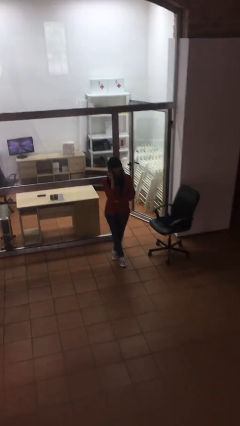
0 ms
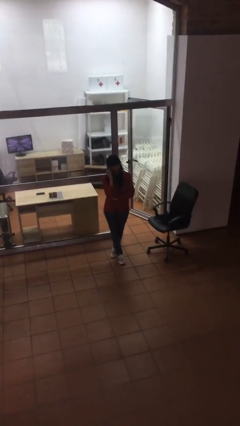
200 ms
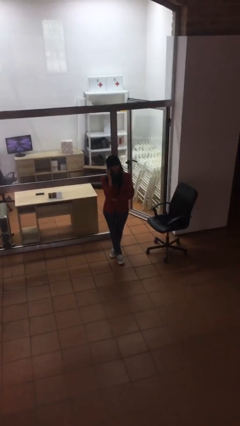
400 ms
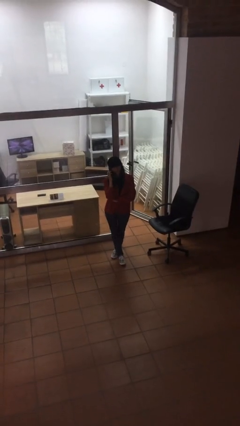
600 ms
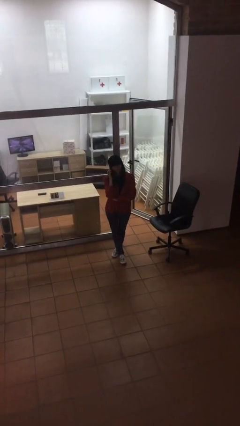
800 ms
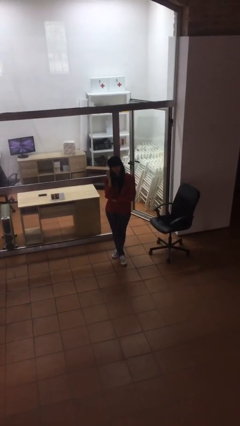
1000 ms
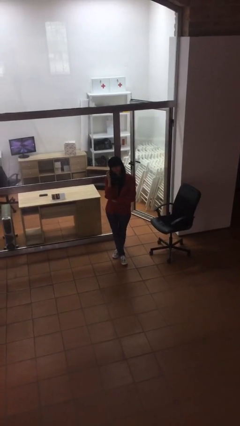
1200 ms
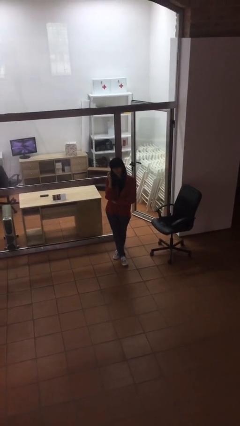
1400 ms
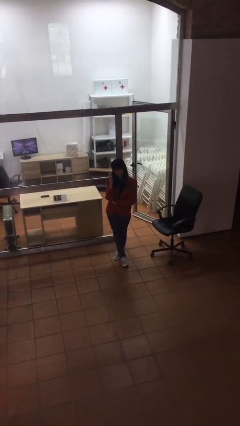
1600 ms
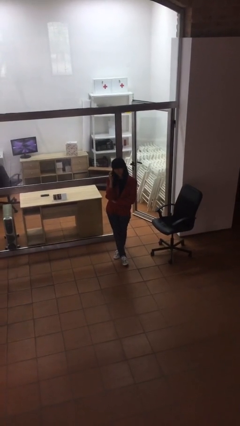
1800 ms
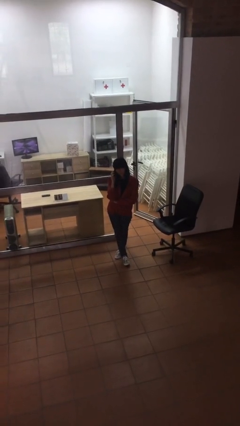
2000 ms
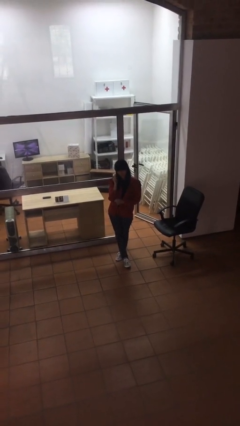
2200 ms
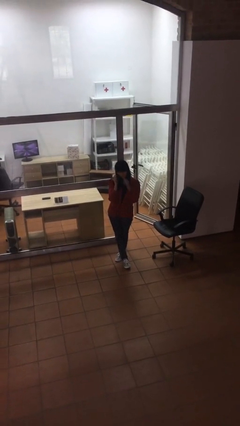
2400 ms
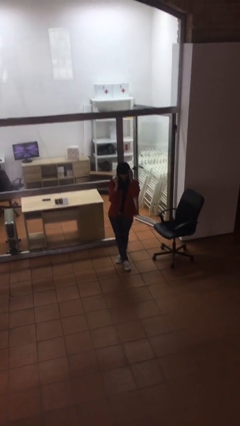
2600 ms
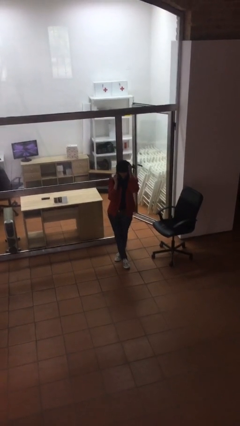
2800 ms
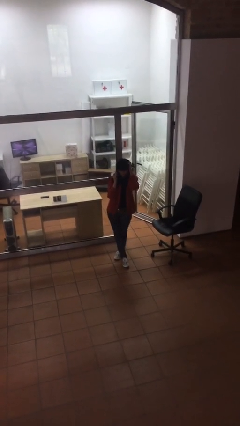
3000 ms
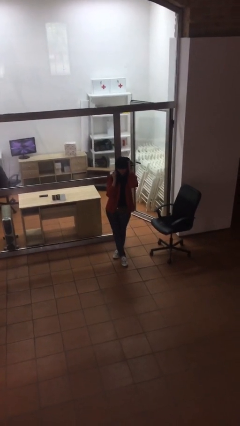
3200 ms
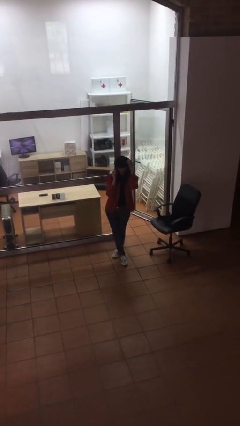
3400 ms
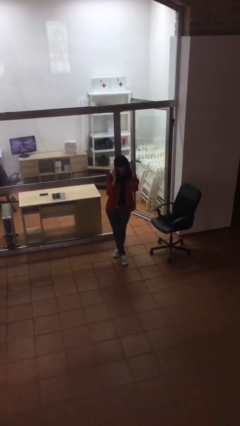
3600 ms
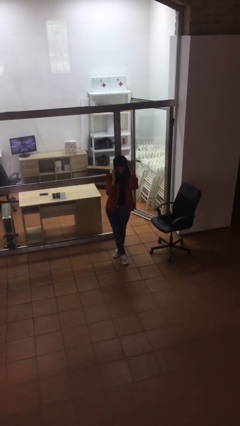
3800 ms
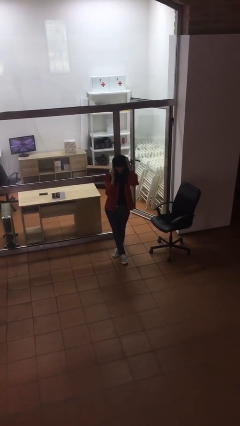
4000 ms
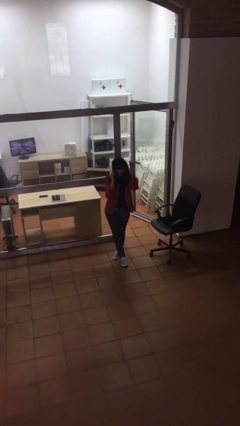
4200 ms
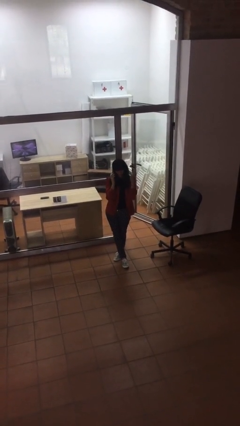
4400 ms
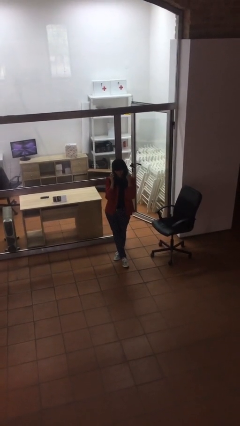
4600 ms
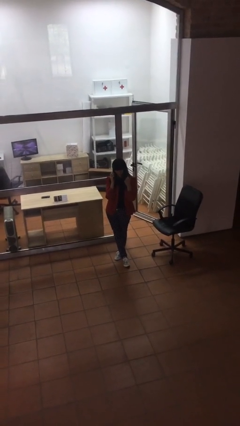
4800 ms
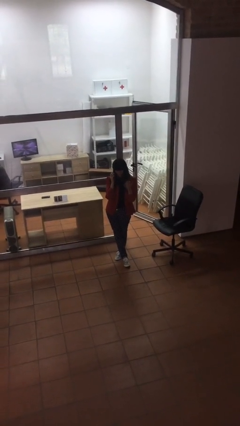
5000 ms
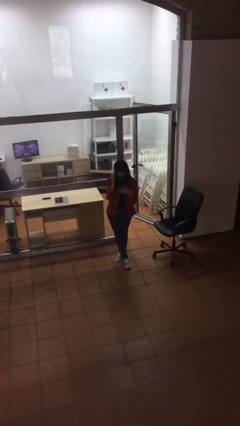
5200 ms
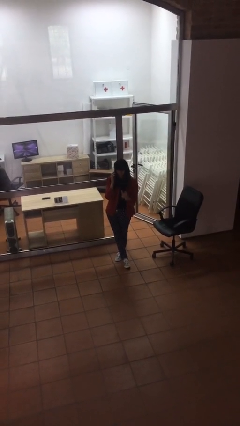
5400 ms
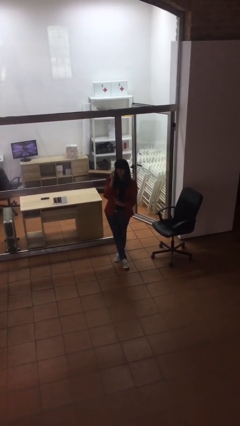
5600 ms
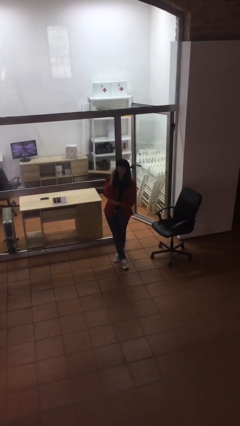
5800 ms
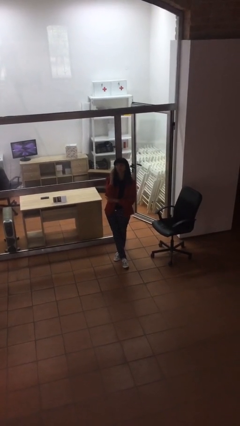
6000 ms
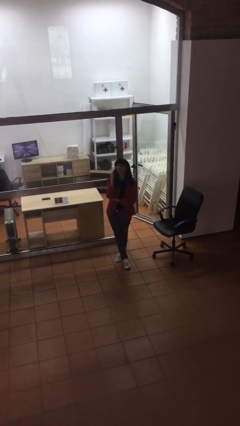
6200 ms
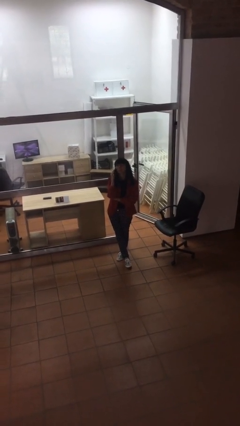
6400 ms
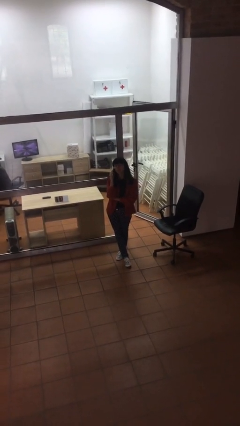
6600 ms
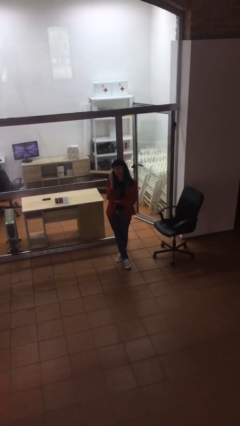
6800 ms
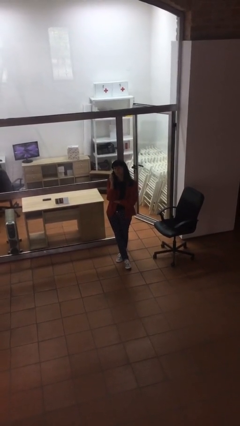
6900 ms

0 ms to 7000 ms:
person talks on phone

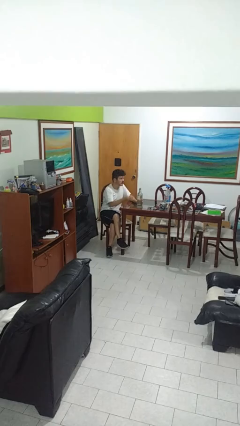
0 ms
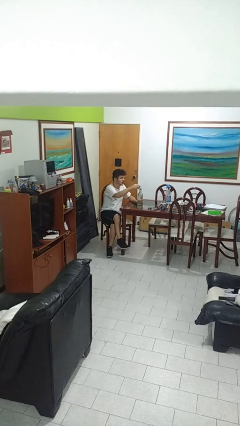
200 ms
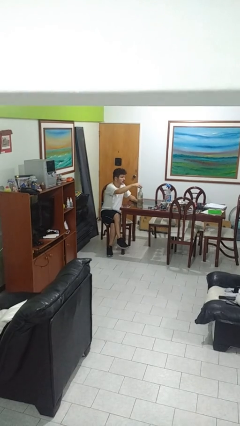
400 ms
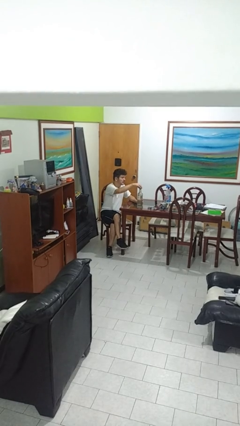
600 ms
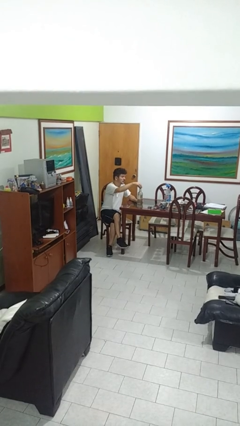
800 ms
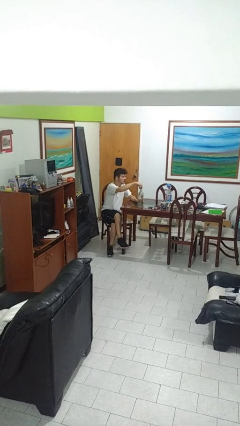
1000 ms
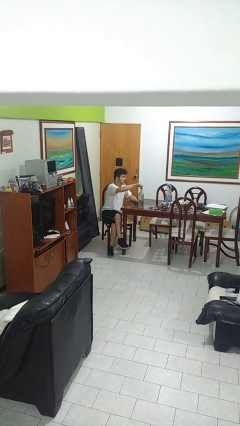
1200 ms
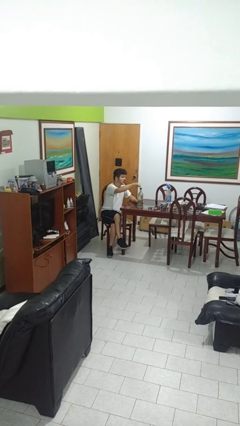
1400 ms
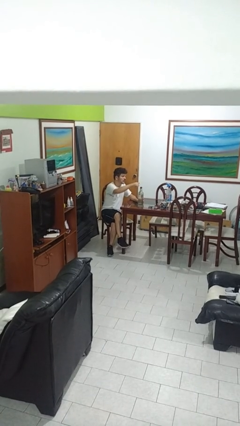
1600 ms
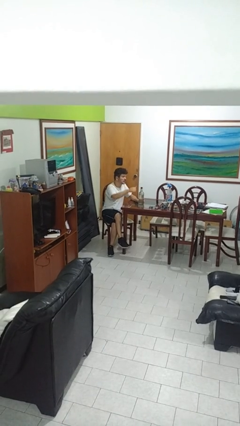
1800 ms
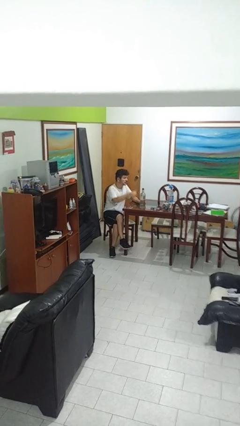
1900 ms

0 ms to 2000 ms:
person screws lid to bottle

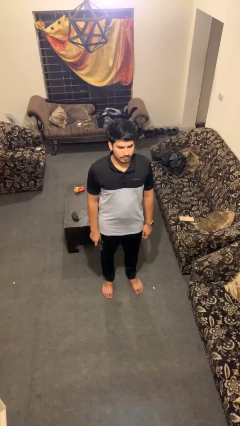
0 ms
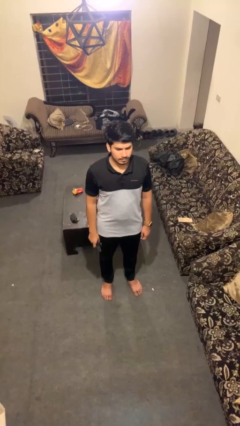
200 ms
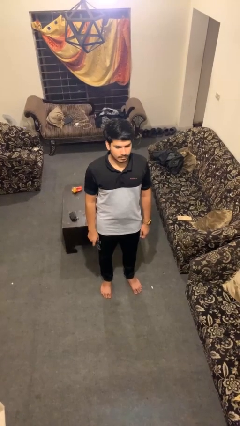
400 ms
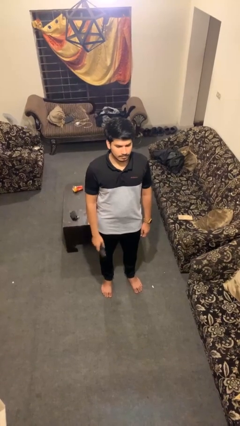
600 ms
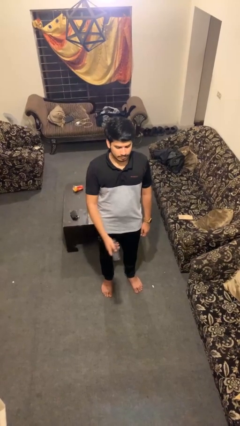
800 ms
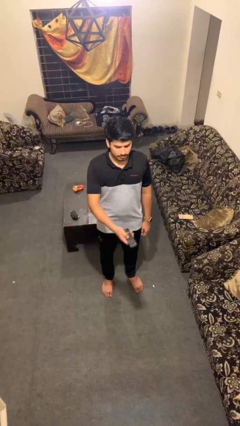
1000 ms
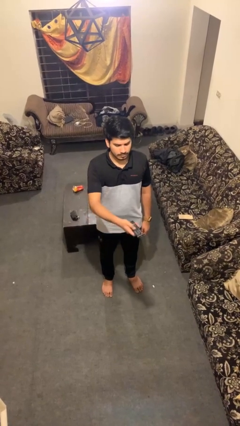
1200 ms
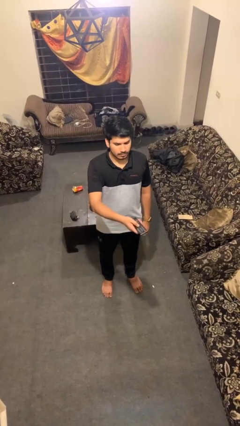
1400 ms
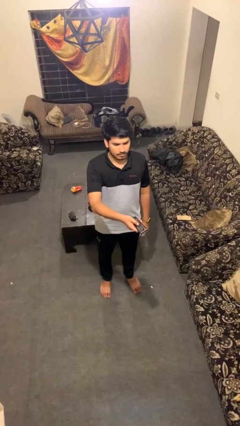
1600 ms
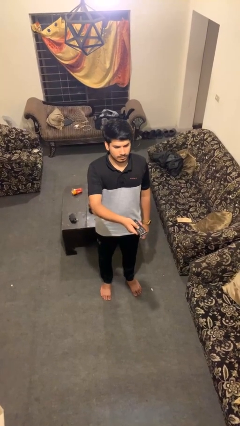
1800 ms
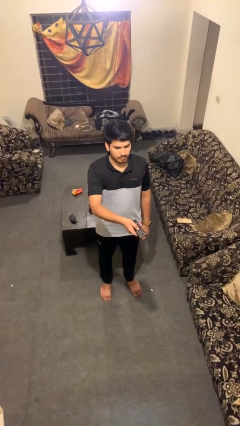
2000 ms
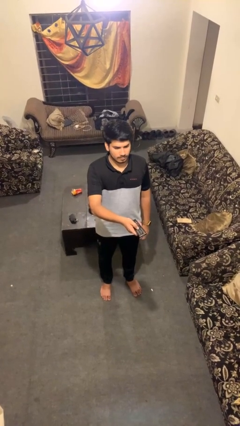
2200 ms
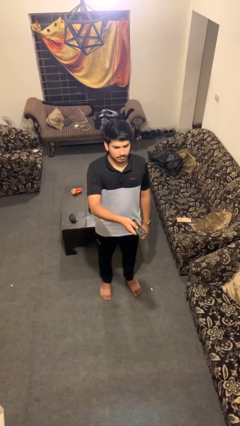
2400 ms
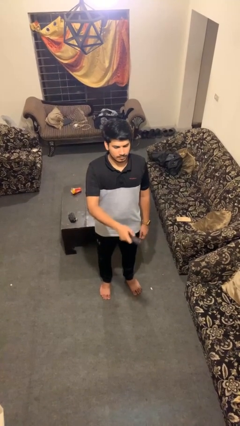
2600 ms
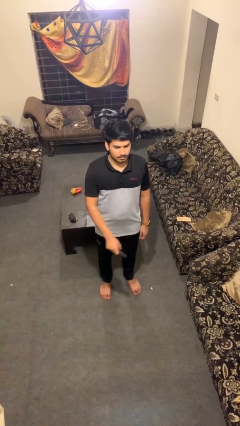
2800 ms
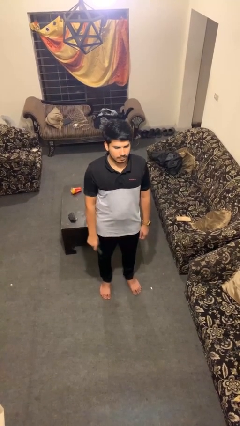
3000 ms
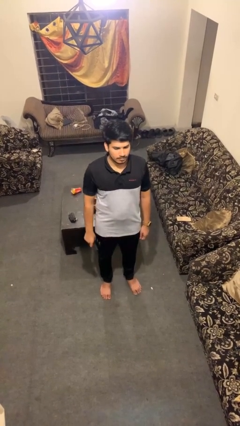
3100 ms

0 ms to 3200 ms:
person uses television remote

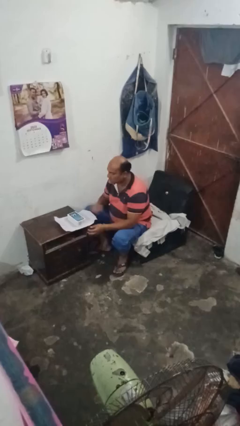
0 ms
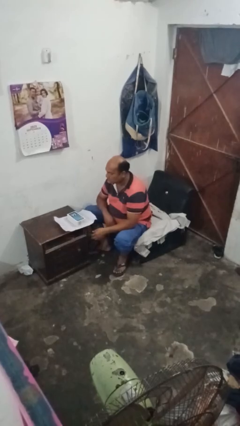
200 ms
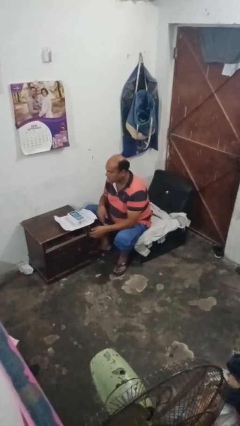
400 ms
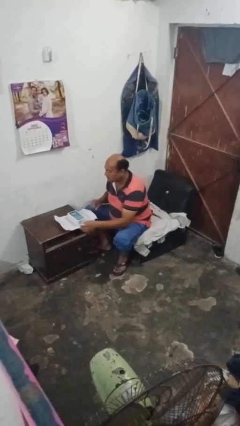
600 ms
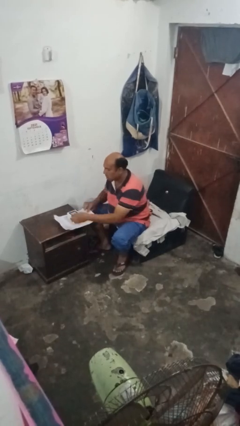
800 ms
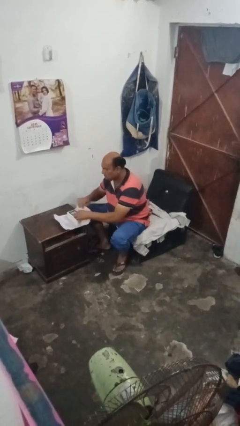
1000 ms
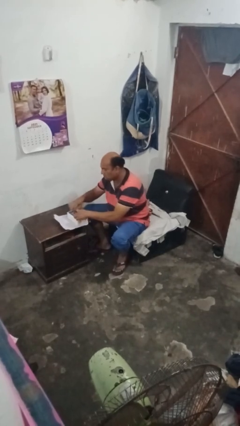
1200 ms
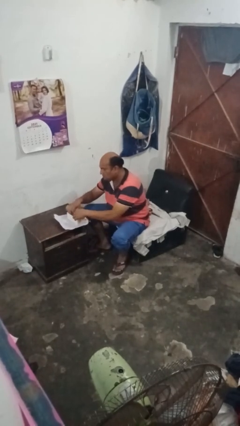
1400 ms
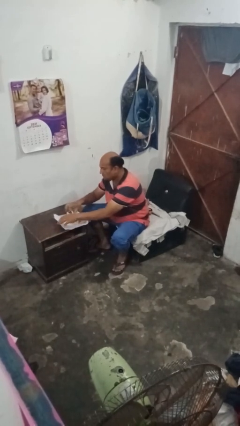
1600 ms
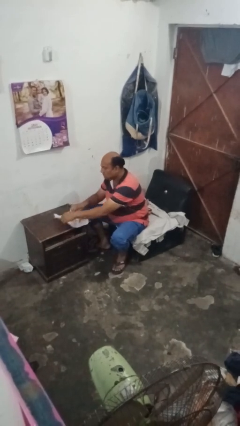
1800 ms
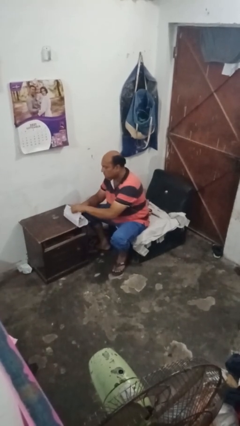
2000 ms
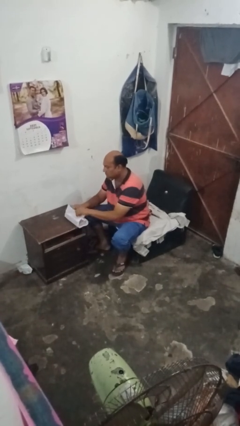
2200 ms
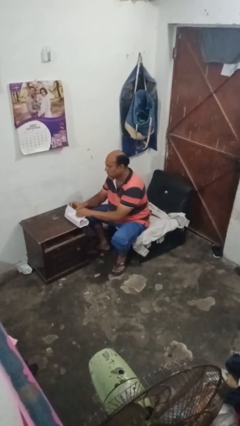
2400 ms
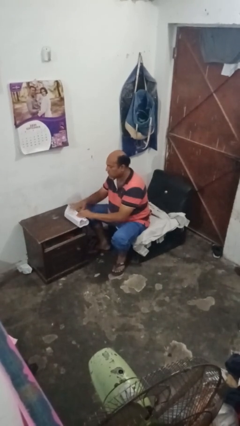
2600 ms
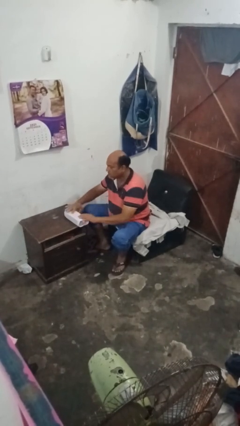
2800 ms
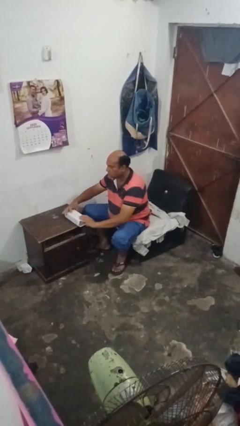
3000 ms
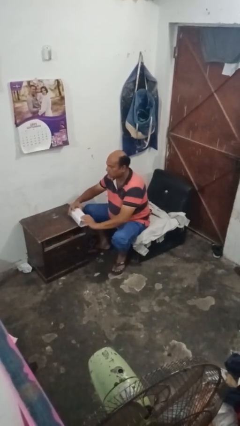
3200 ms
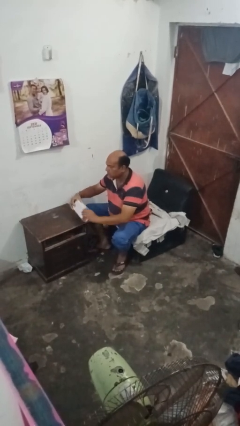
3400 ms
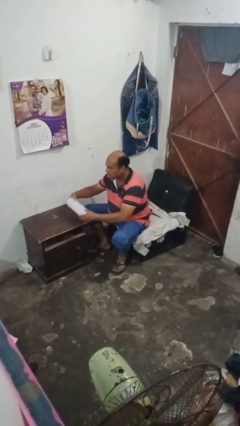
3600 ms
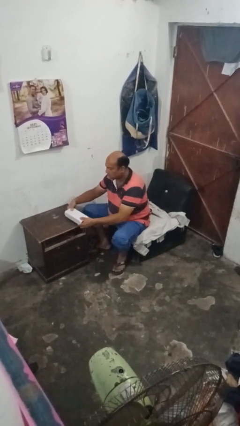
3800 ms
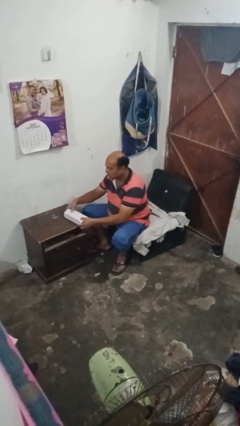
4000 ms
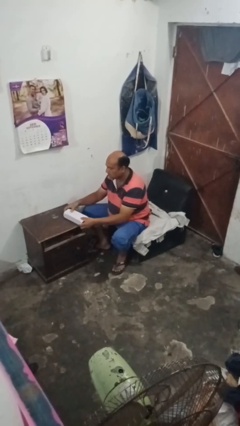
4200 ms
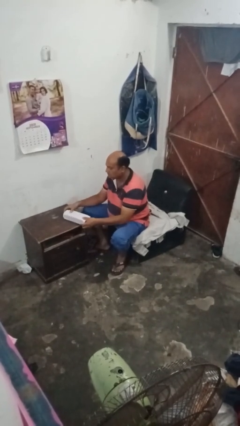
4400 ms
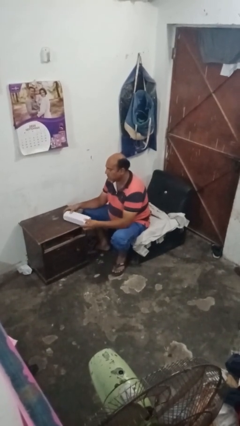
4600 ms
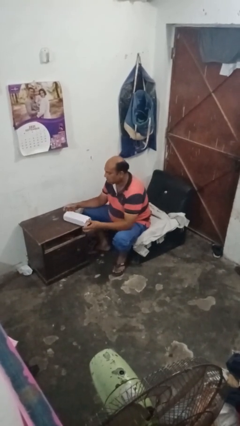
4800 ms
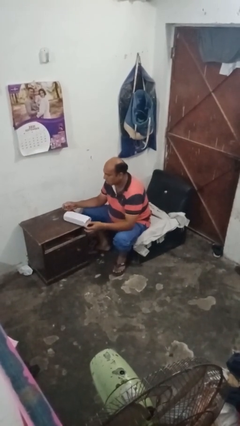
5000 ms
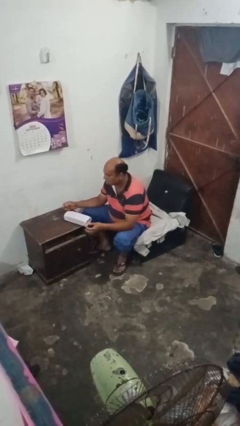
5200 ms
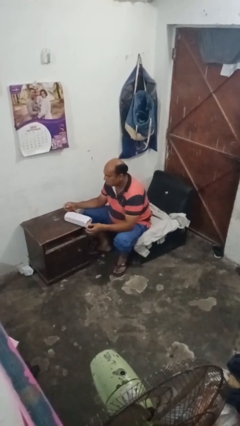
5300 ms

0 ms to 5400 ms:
person wraps box
